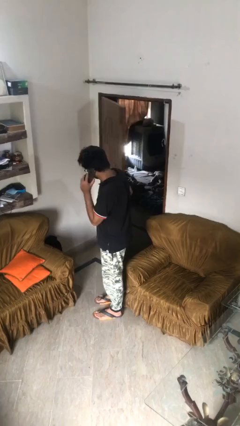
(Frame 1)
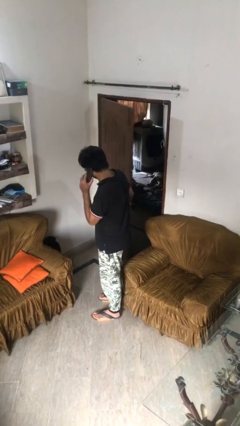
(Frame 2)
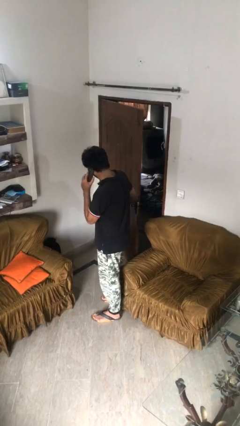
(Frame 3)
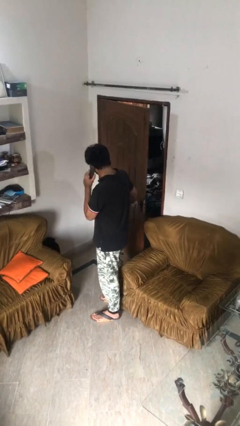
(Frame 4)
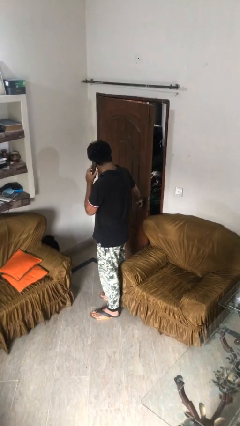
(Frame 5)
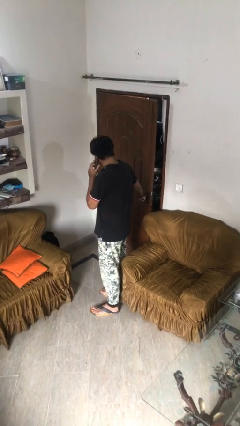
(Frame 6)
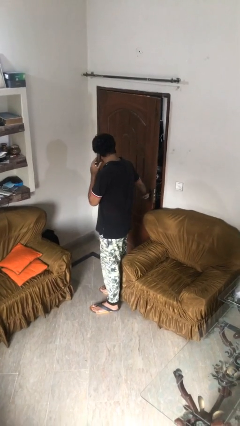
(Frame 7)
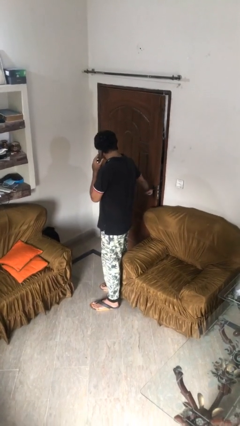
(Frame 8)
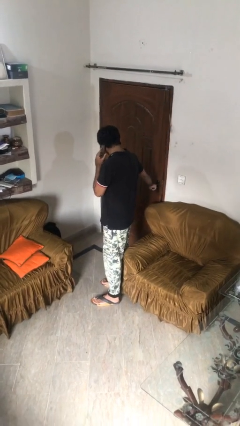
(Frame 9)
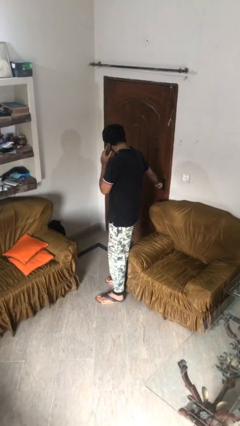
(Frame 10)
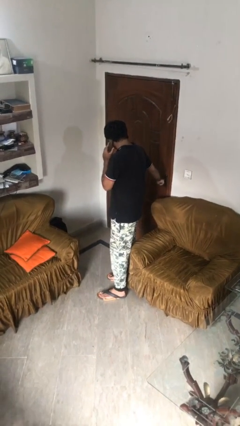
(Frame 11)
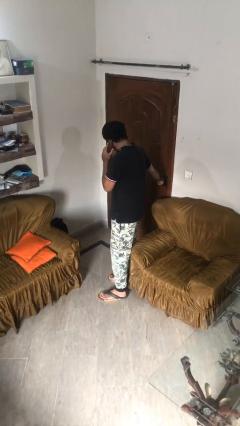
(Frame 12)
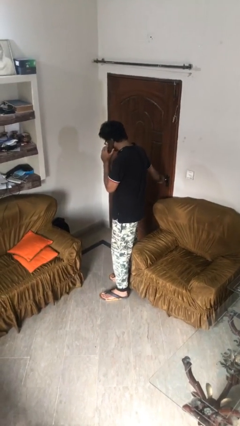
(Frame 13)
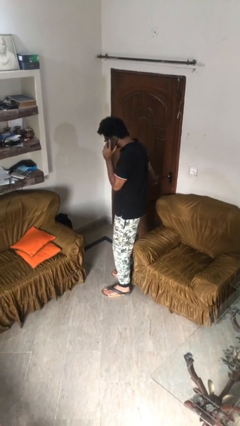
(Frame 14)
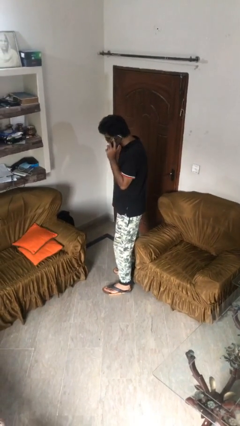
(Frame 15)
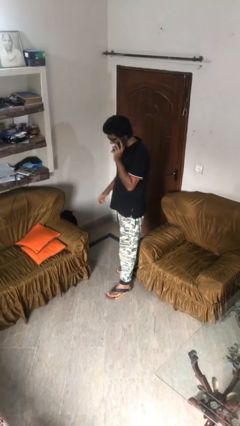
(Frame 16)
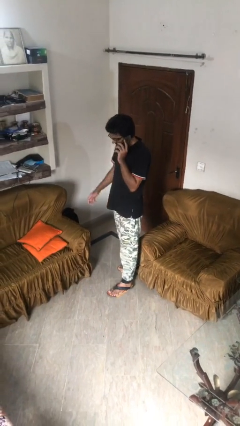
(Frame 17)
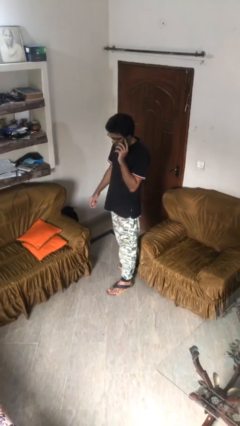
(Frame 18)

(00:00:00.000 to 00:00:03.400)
person closes facility door

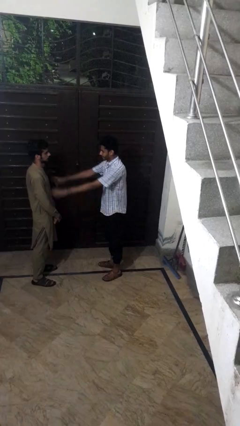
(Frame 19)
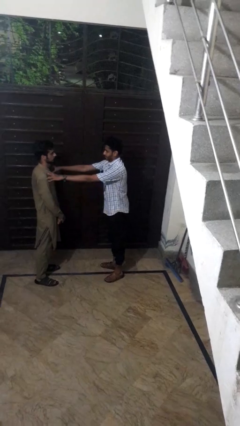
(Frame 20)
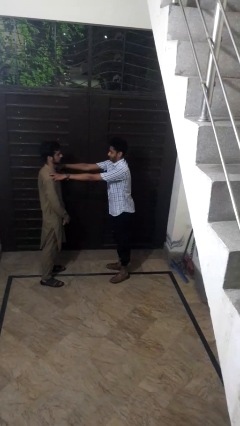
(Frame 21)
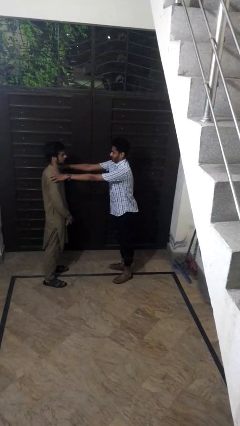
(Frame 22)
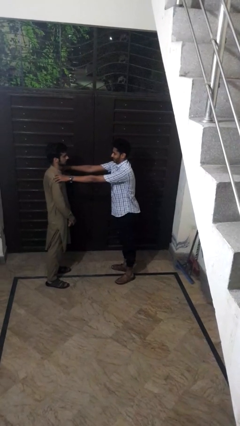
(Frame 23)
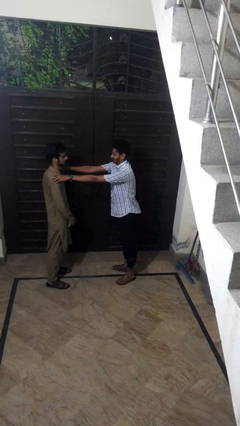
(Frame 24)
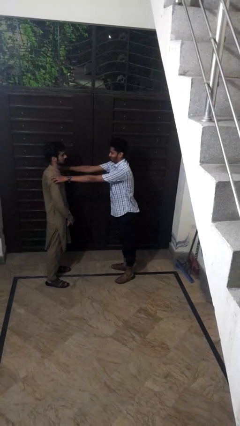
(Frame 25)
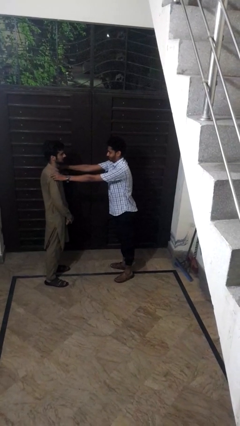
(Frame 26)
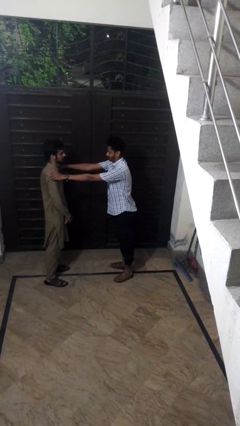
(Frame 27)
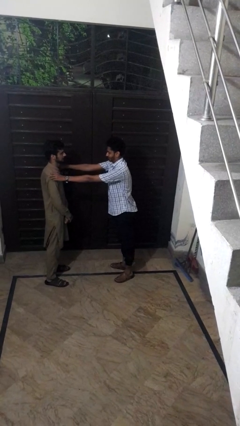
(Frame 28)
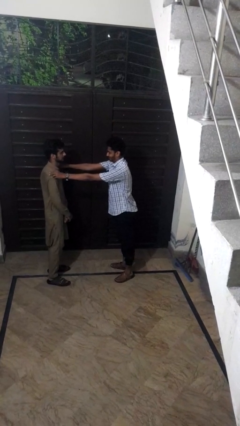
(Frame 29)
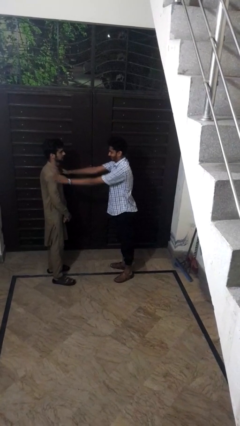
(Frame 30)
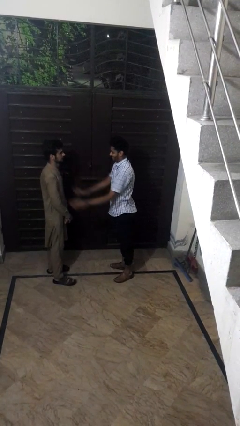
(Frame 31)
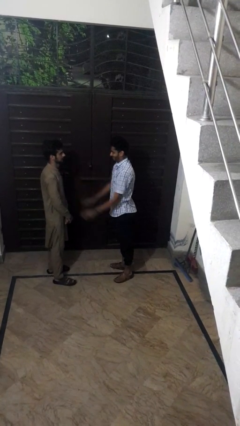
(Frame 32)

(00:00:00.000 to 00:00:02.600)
person pounds shoulders of person

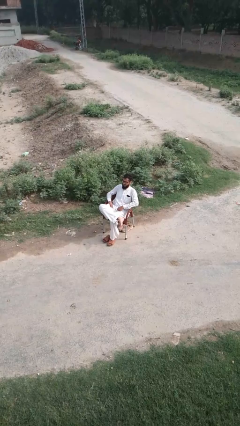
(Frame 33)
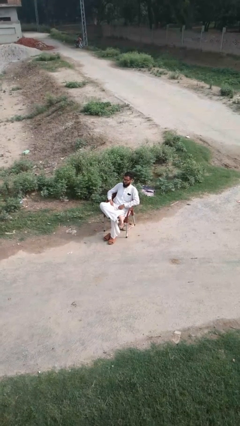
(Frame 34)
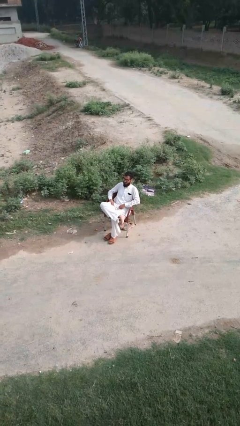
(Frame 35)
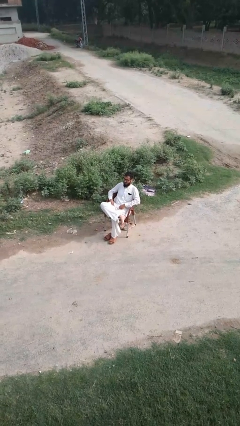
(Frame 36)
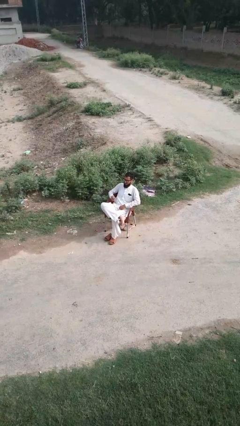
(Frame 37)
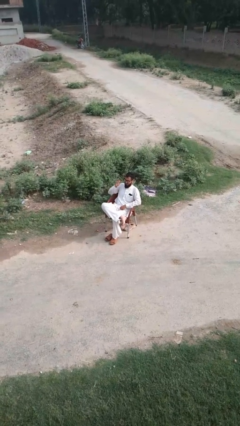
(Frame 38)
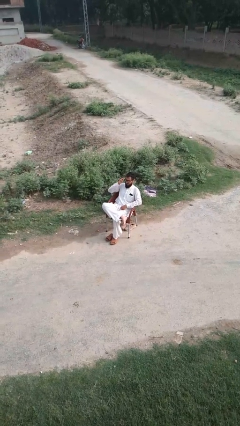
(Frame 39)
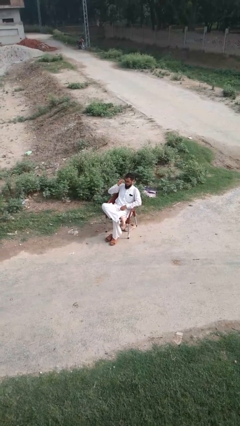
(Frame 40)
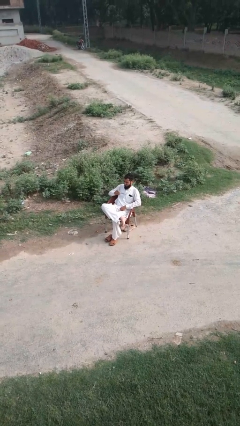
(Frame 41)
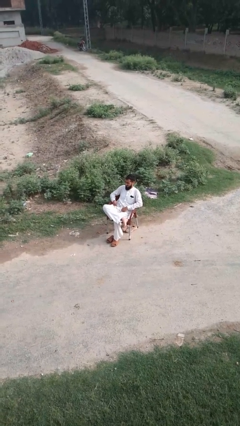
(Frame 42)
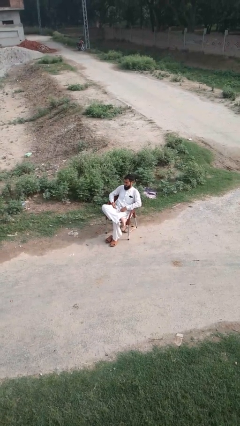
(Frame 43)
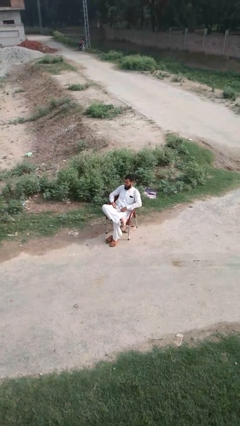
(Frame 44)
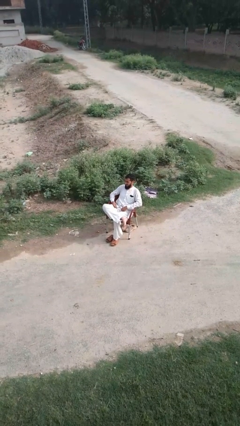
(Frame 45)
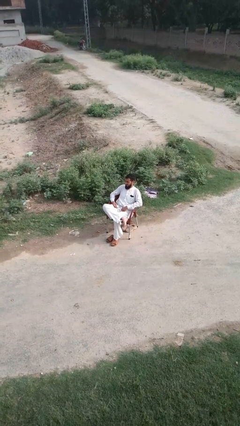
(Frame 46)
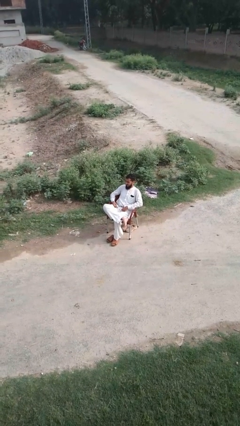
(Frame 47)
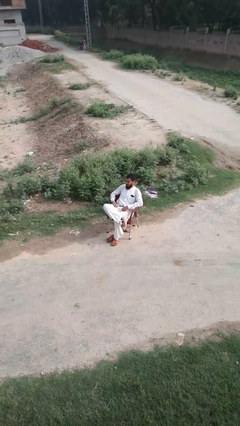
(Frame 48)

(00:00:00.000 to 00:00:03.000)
person takes off glasses

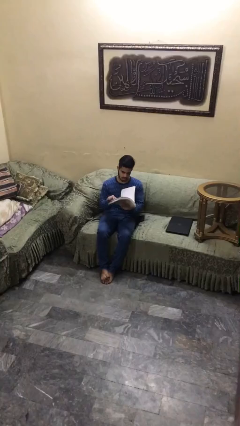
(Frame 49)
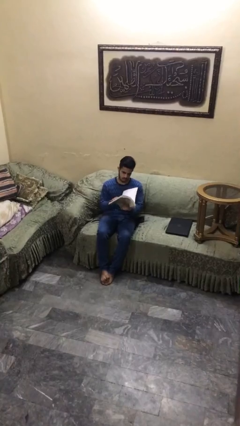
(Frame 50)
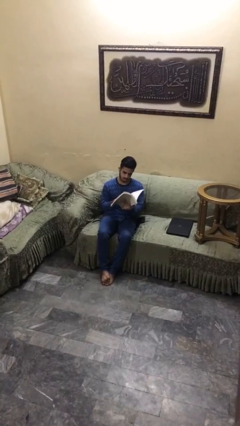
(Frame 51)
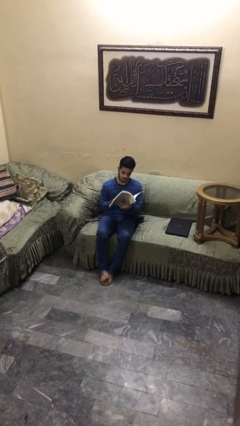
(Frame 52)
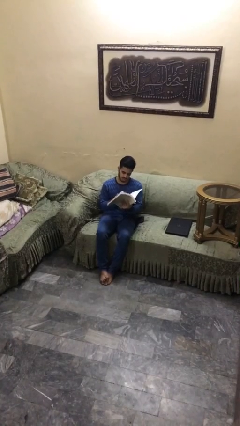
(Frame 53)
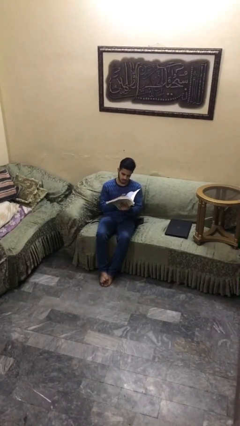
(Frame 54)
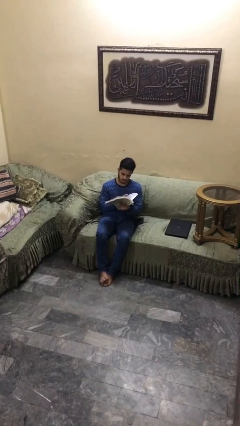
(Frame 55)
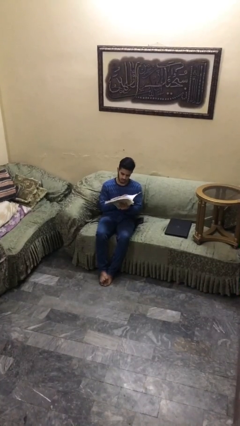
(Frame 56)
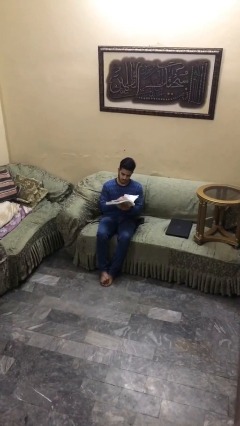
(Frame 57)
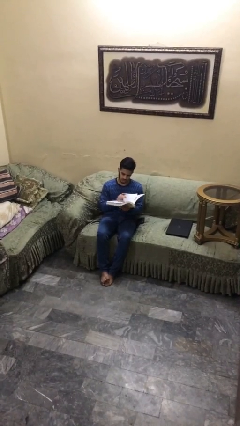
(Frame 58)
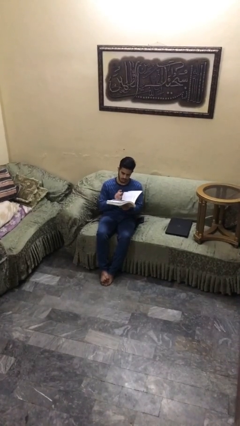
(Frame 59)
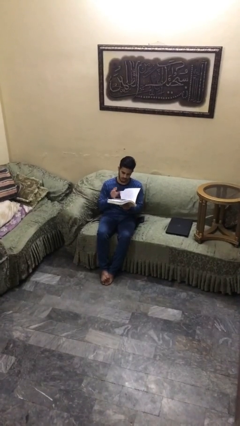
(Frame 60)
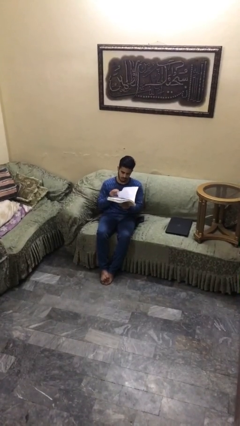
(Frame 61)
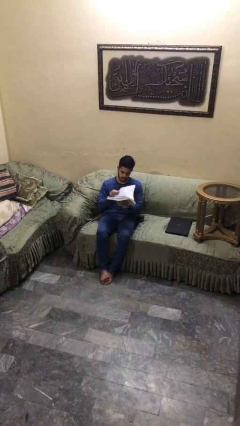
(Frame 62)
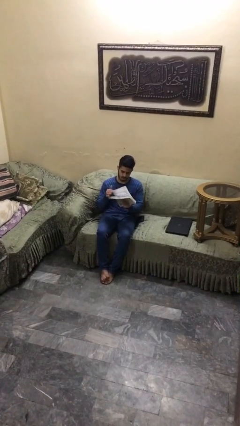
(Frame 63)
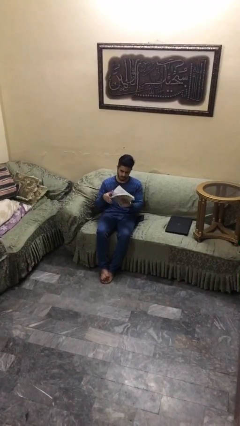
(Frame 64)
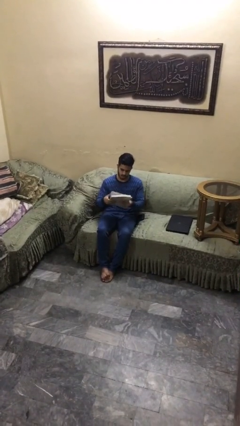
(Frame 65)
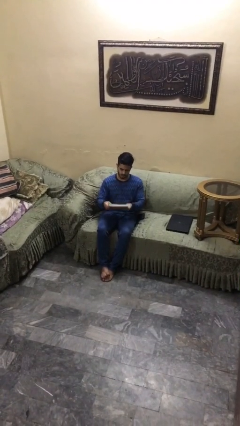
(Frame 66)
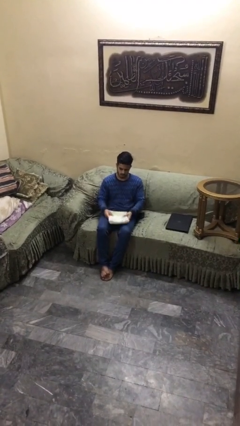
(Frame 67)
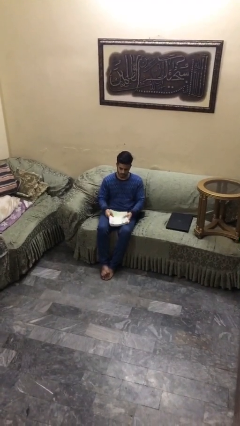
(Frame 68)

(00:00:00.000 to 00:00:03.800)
person reads document

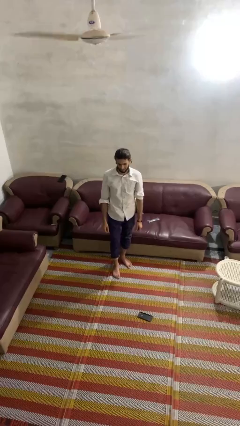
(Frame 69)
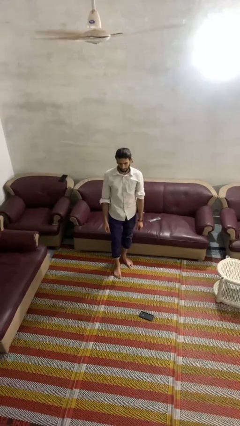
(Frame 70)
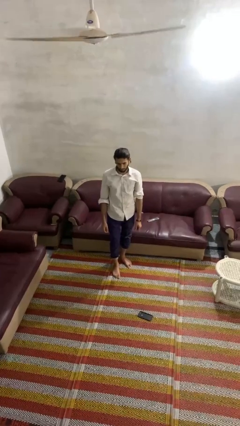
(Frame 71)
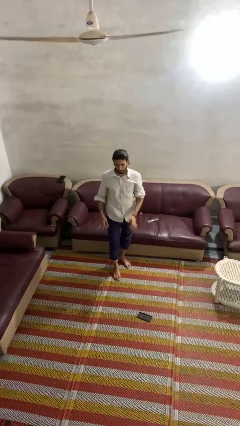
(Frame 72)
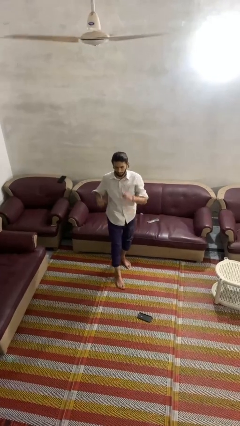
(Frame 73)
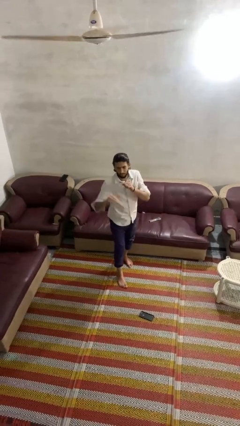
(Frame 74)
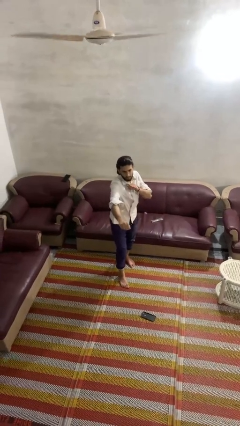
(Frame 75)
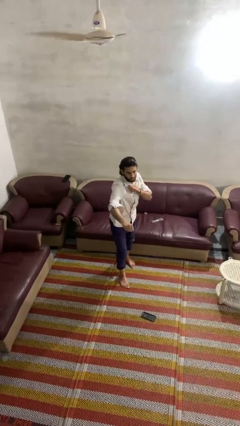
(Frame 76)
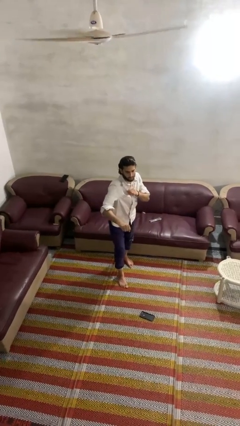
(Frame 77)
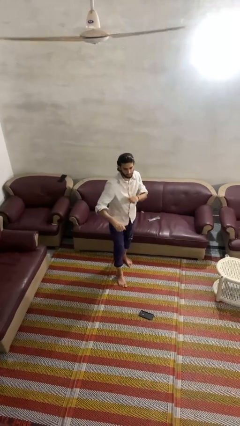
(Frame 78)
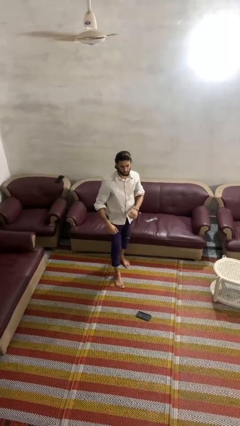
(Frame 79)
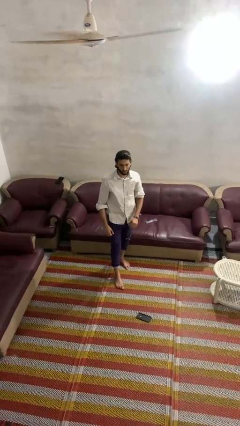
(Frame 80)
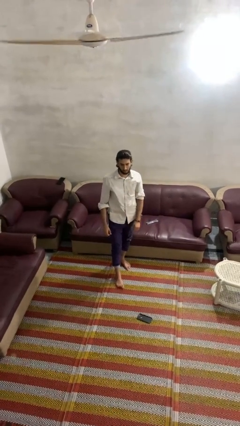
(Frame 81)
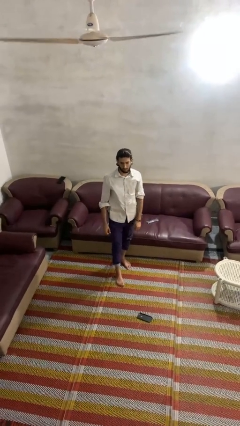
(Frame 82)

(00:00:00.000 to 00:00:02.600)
person punches

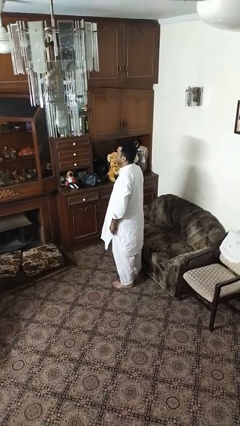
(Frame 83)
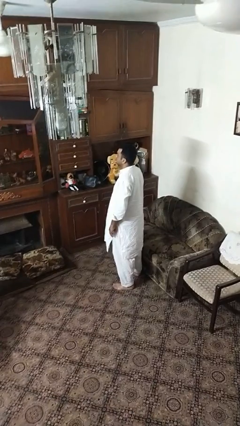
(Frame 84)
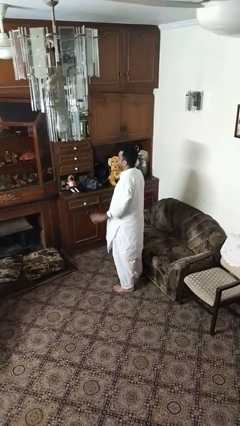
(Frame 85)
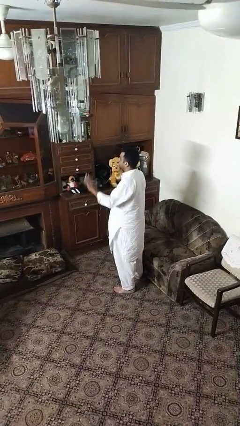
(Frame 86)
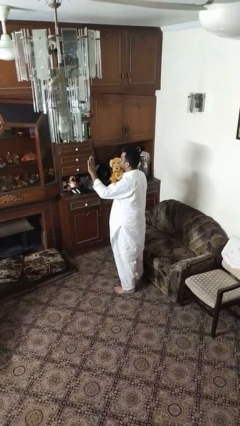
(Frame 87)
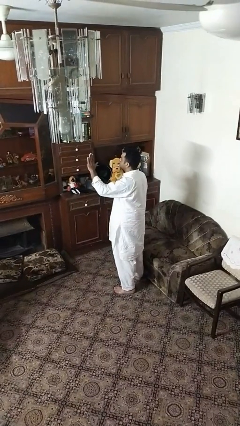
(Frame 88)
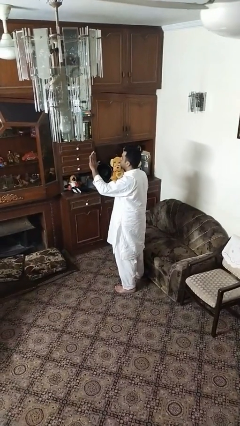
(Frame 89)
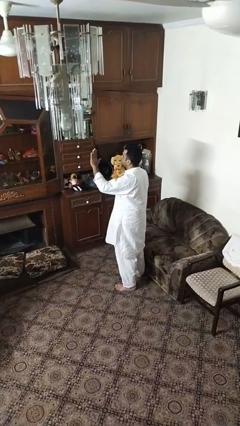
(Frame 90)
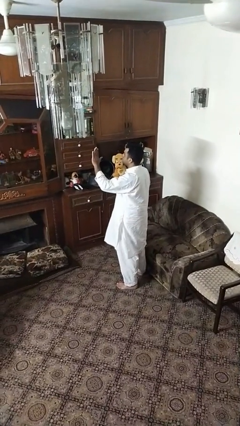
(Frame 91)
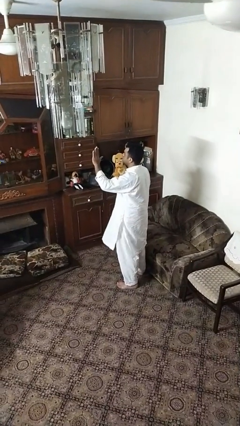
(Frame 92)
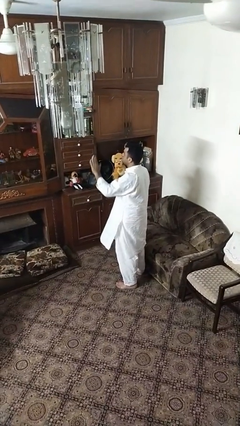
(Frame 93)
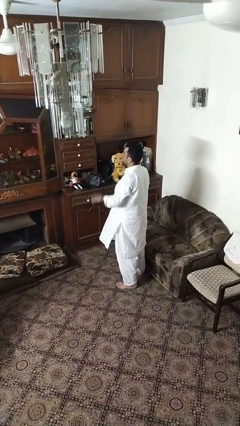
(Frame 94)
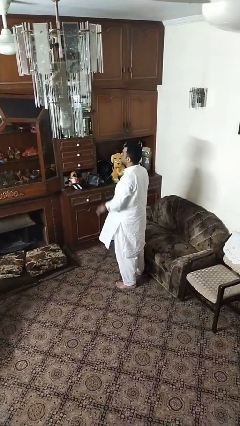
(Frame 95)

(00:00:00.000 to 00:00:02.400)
person gestures stop
